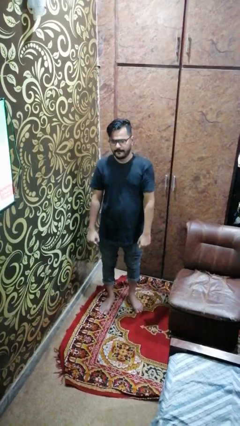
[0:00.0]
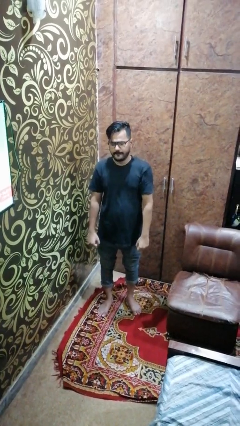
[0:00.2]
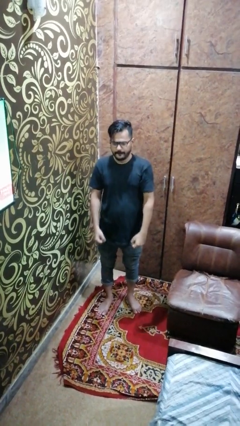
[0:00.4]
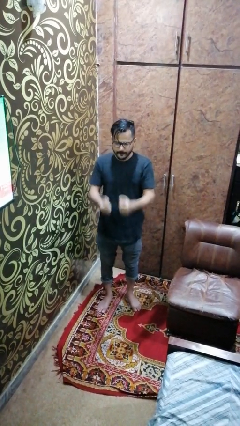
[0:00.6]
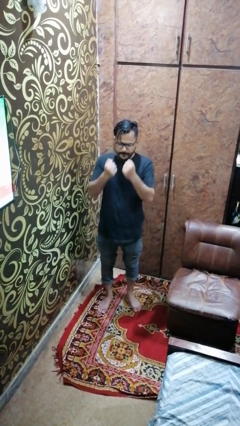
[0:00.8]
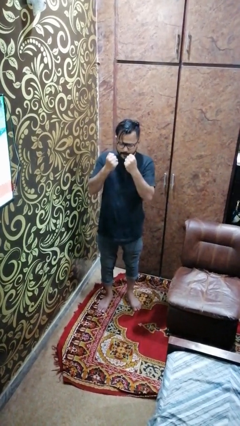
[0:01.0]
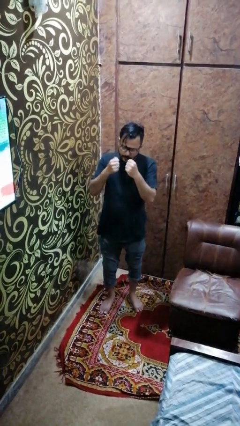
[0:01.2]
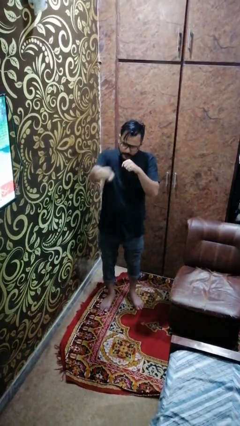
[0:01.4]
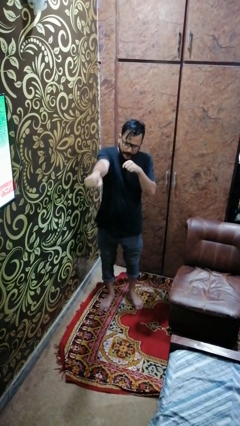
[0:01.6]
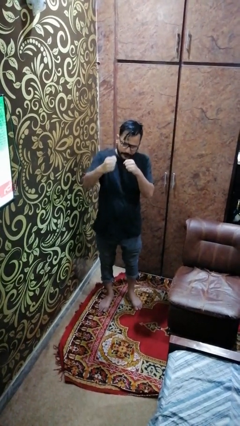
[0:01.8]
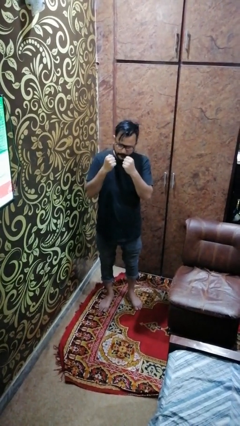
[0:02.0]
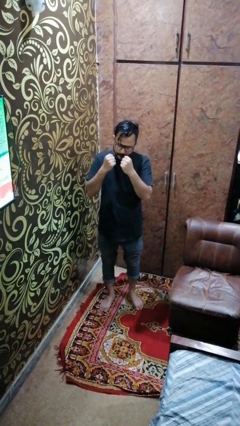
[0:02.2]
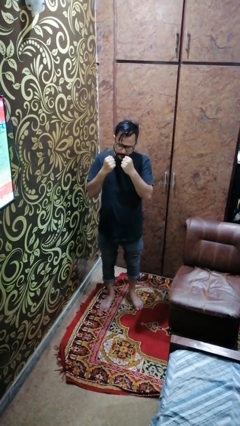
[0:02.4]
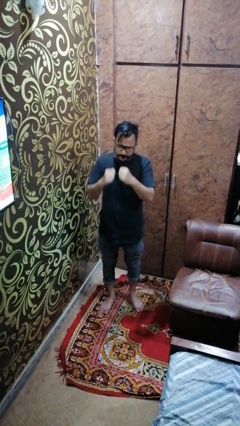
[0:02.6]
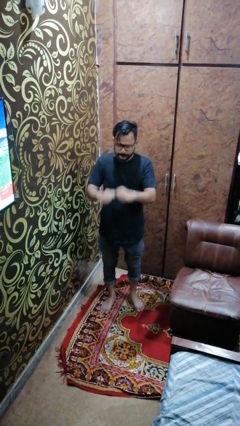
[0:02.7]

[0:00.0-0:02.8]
person punches

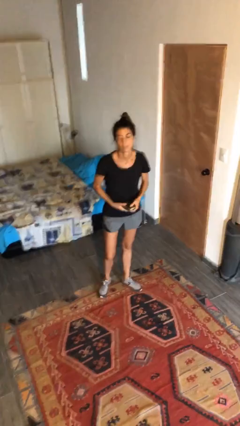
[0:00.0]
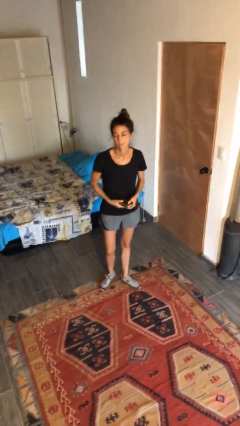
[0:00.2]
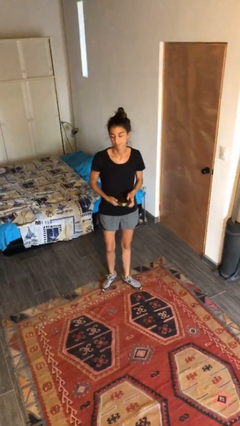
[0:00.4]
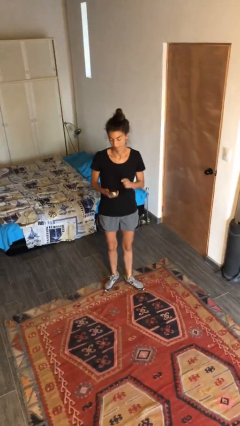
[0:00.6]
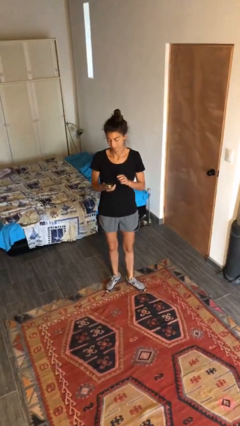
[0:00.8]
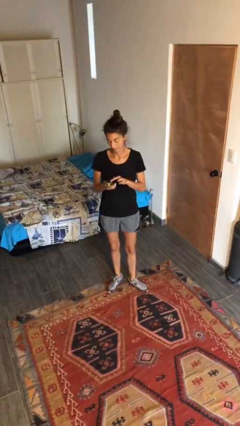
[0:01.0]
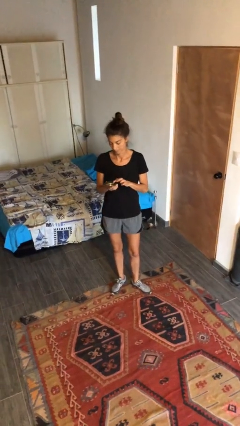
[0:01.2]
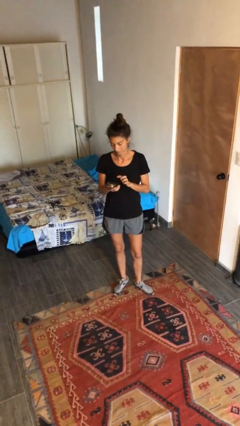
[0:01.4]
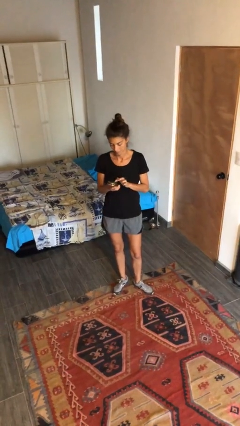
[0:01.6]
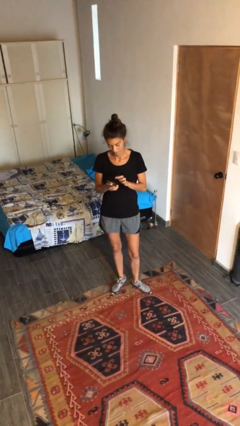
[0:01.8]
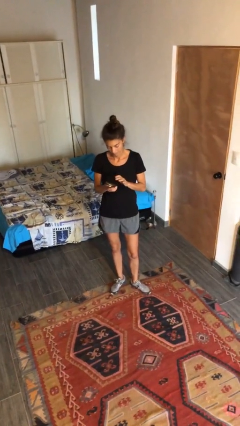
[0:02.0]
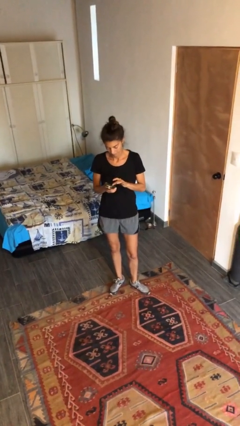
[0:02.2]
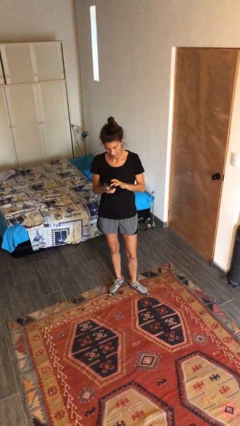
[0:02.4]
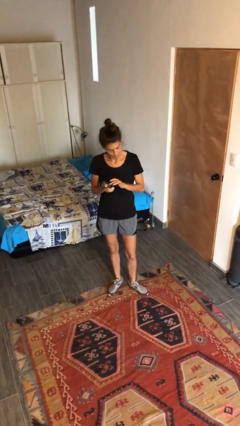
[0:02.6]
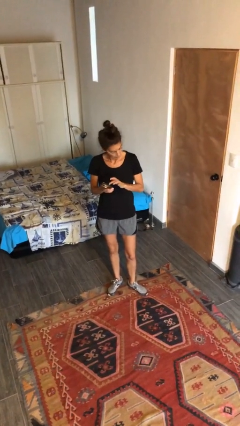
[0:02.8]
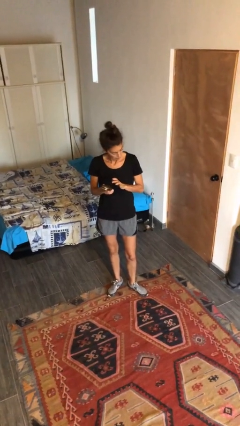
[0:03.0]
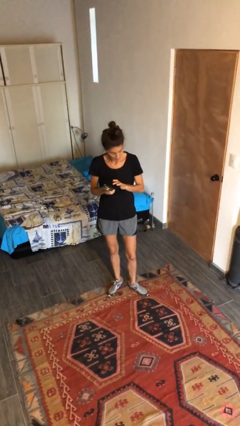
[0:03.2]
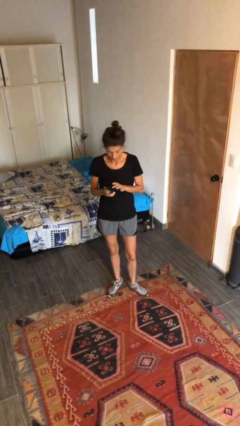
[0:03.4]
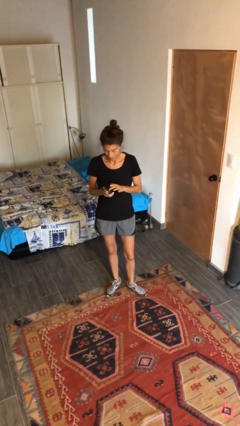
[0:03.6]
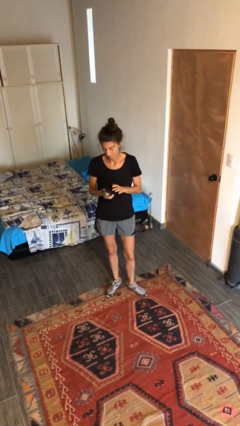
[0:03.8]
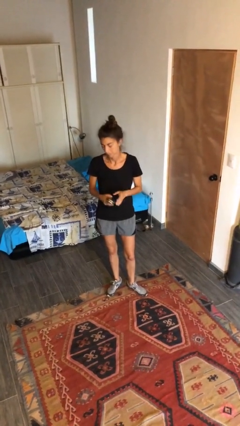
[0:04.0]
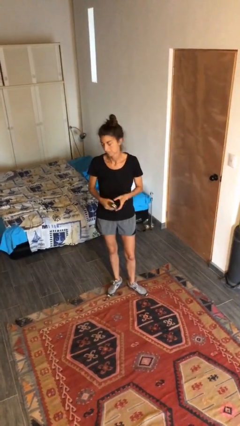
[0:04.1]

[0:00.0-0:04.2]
person taps object with finger

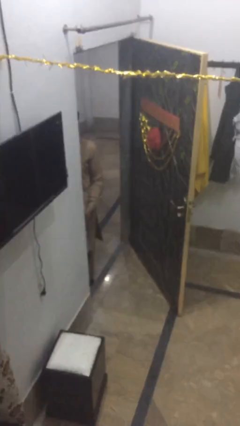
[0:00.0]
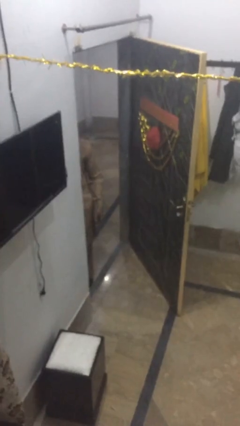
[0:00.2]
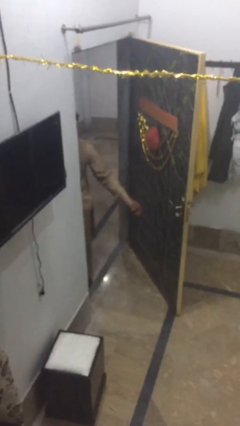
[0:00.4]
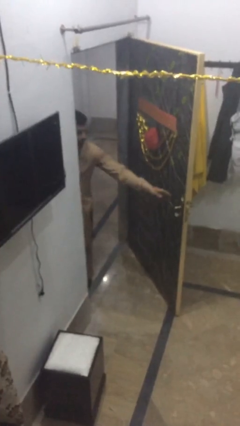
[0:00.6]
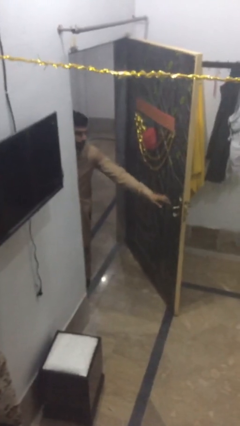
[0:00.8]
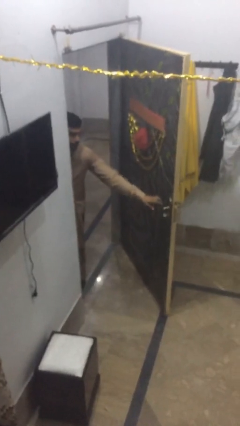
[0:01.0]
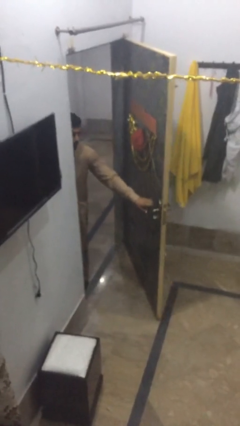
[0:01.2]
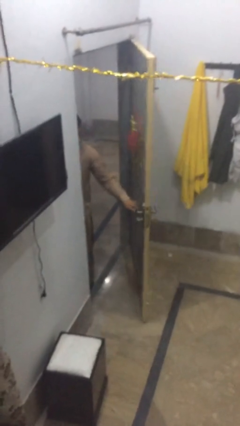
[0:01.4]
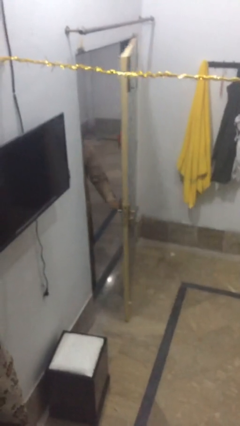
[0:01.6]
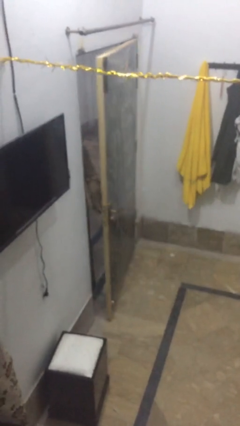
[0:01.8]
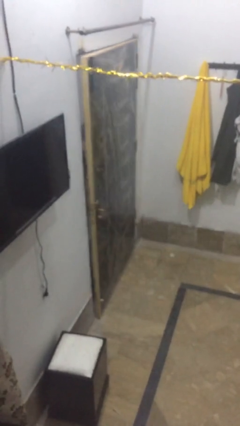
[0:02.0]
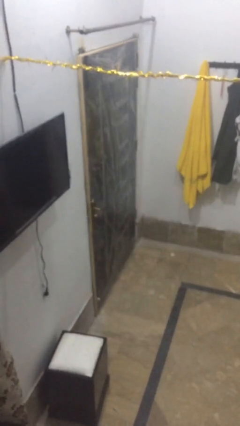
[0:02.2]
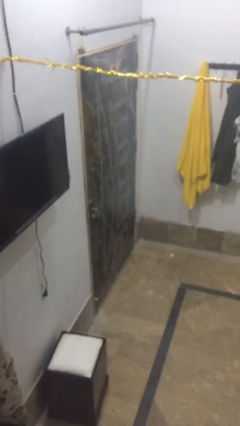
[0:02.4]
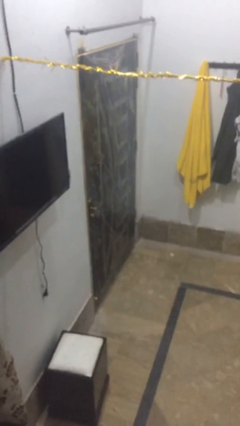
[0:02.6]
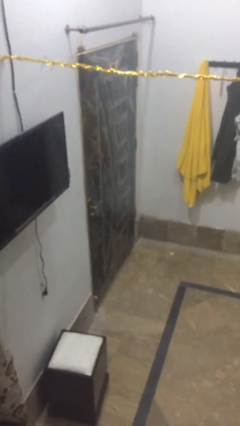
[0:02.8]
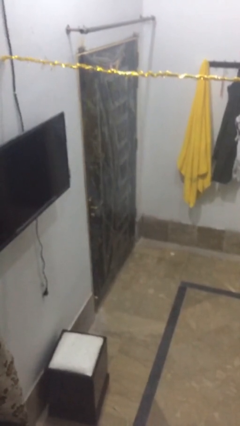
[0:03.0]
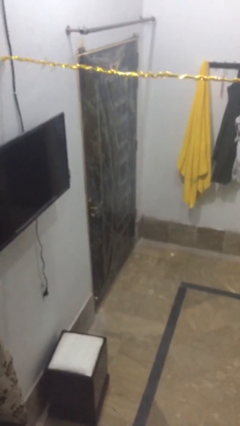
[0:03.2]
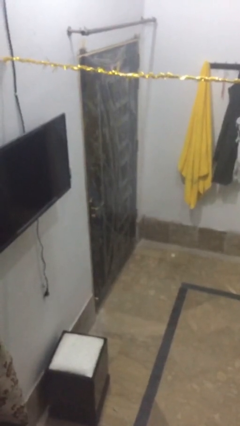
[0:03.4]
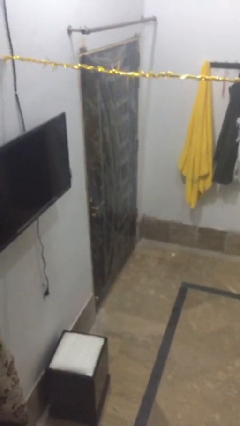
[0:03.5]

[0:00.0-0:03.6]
person closes facility door

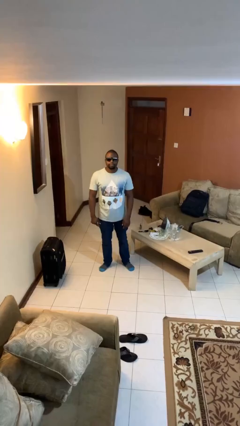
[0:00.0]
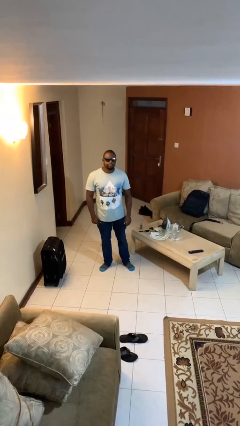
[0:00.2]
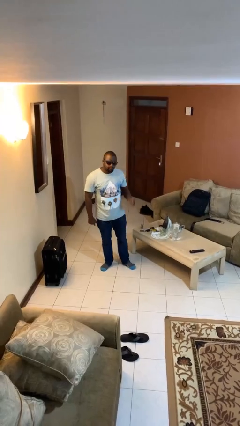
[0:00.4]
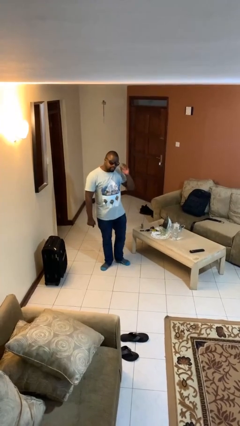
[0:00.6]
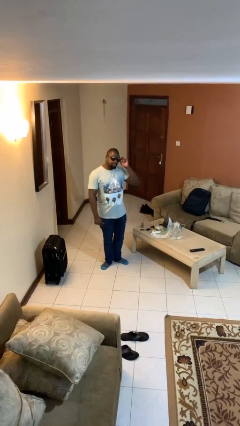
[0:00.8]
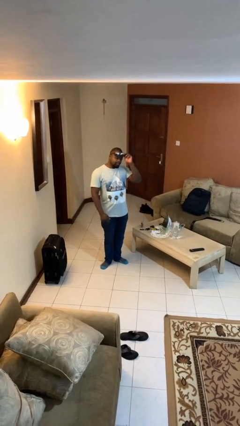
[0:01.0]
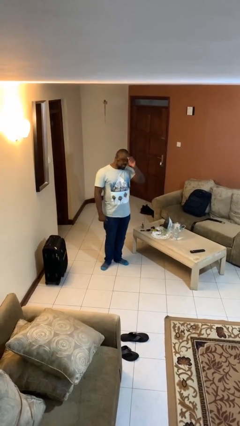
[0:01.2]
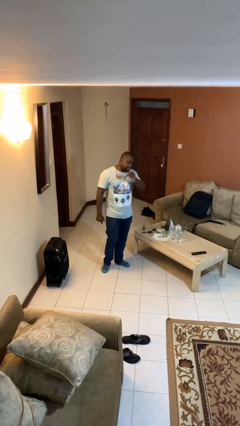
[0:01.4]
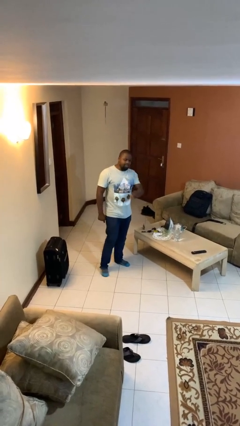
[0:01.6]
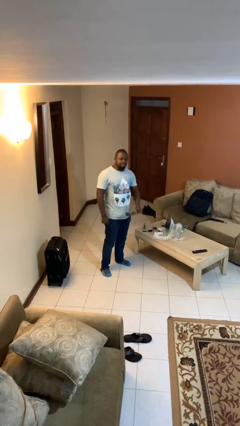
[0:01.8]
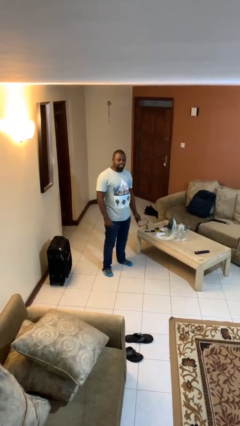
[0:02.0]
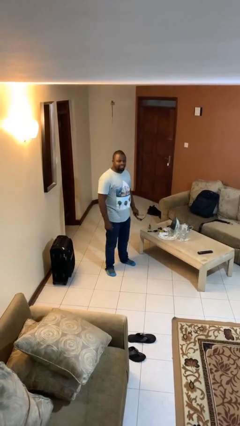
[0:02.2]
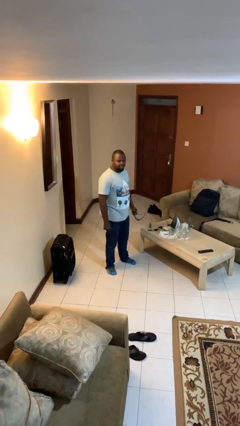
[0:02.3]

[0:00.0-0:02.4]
person takes off sunglasses

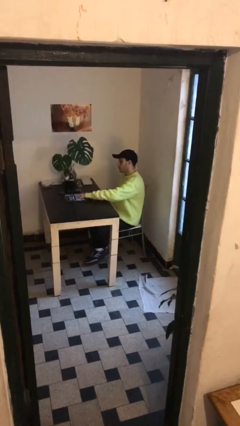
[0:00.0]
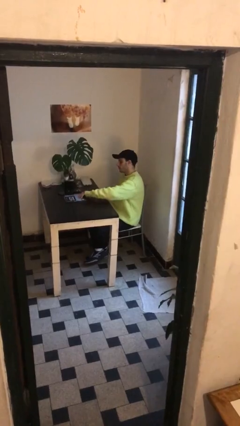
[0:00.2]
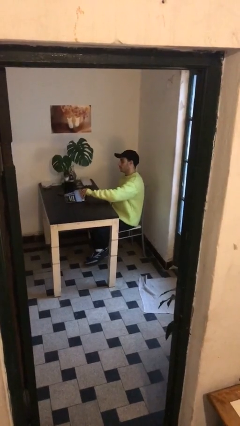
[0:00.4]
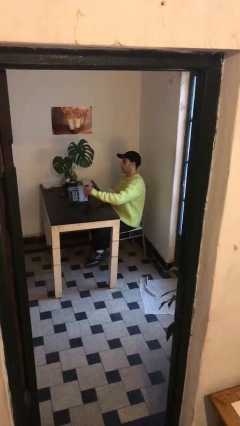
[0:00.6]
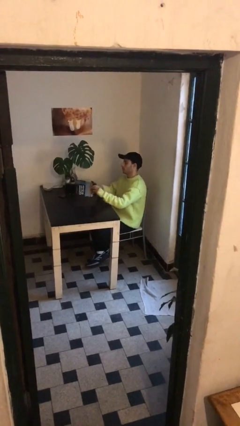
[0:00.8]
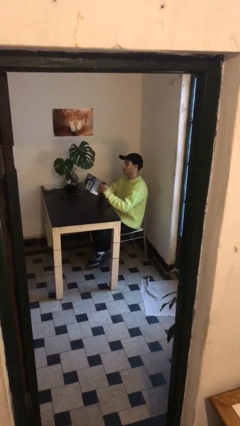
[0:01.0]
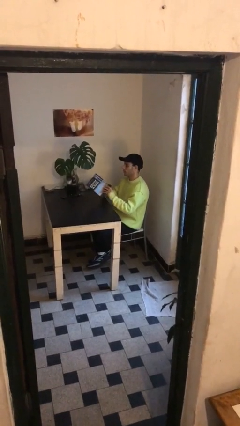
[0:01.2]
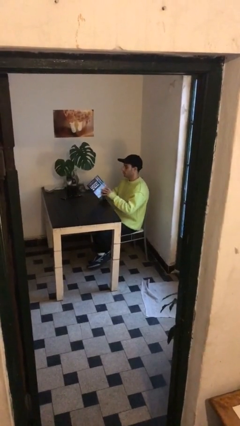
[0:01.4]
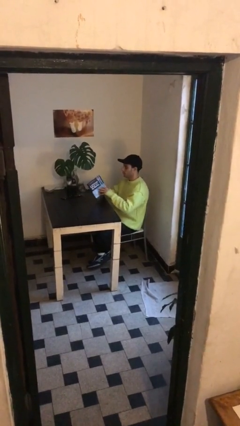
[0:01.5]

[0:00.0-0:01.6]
person picks up object from table

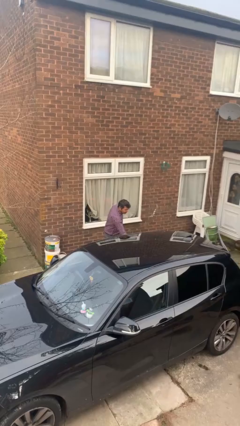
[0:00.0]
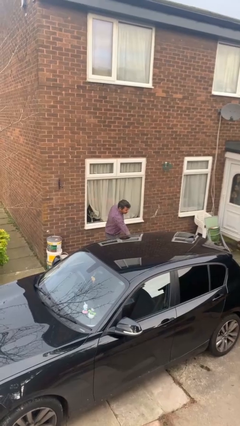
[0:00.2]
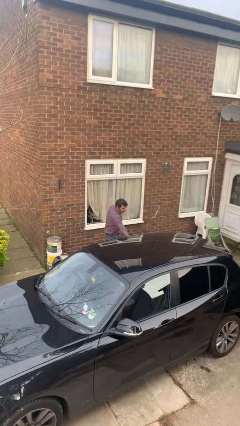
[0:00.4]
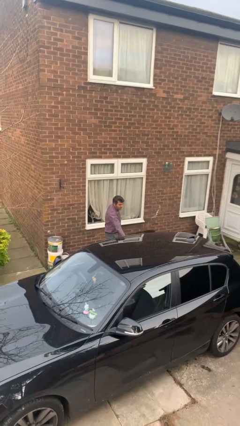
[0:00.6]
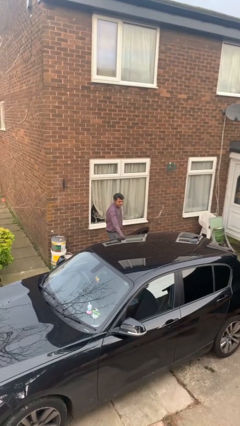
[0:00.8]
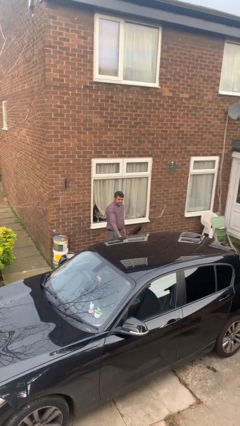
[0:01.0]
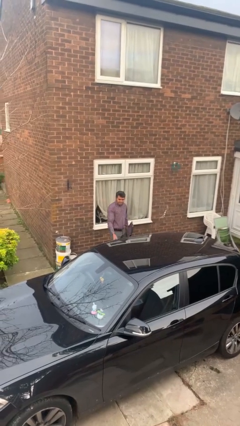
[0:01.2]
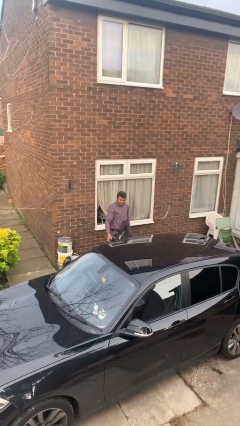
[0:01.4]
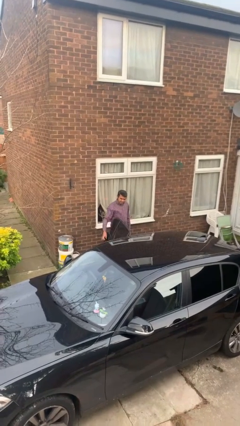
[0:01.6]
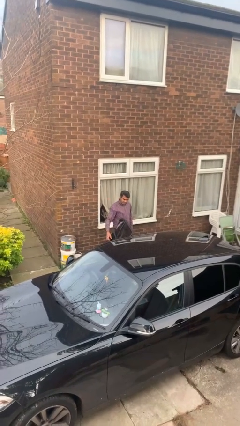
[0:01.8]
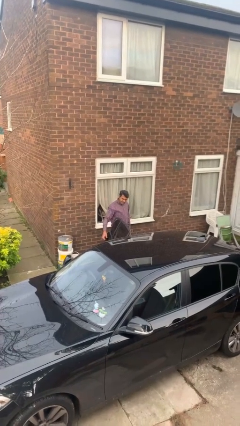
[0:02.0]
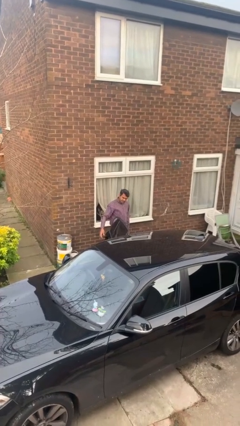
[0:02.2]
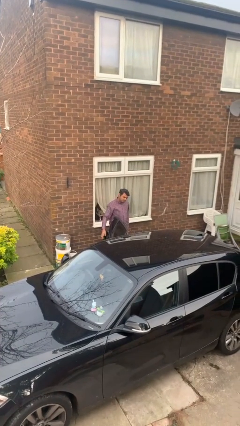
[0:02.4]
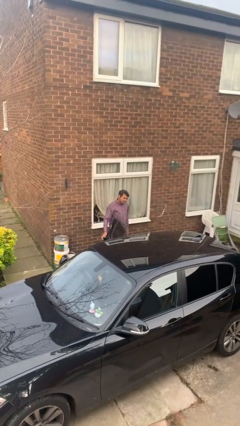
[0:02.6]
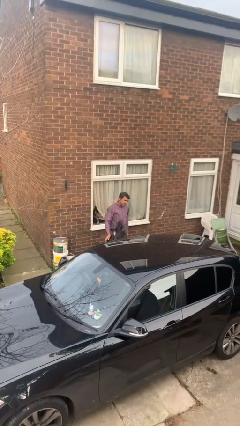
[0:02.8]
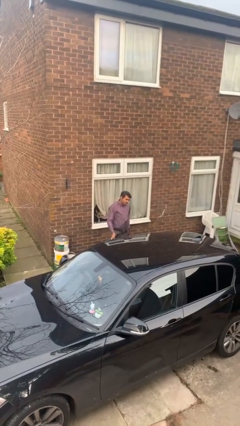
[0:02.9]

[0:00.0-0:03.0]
person opens car door
